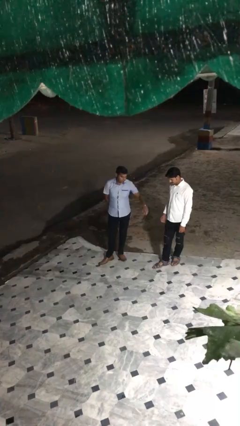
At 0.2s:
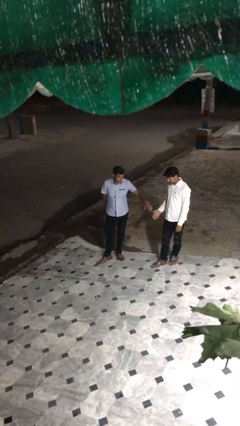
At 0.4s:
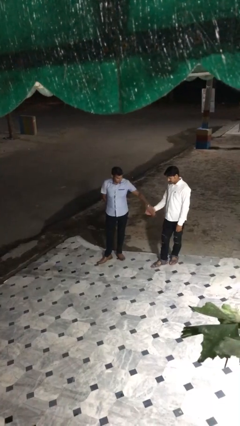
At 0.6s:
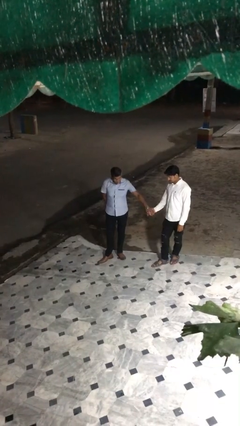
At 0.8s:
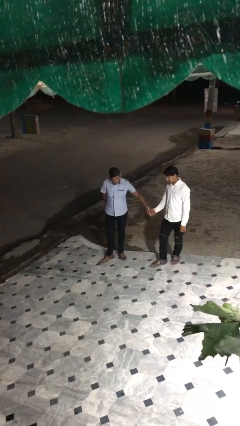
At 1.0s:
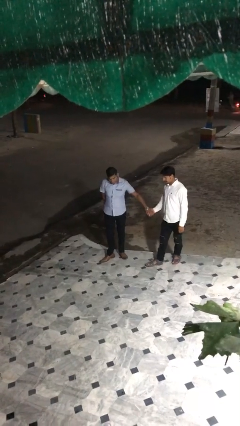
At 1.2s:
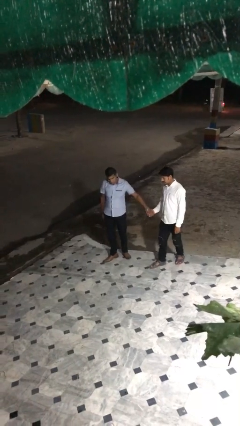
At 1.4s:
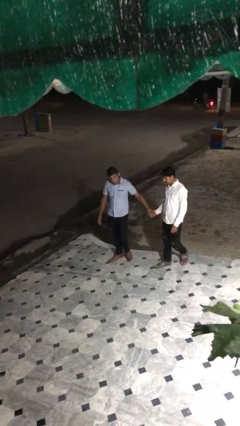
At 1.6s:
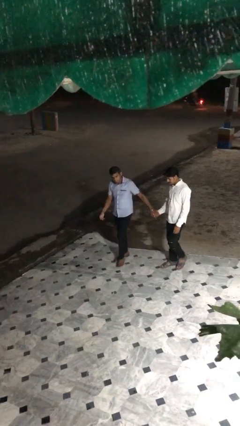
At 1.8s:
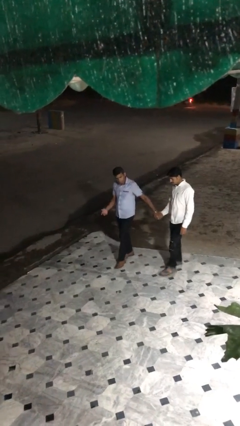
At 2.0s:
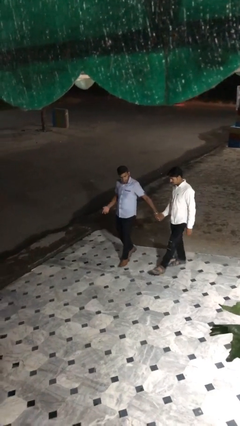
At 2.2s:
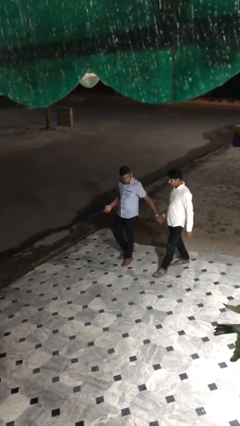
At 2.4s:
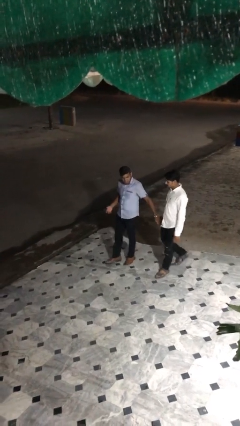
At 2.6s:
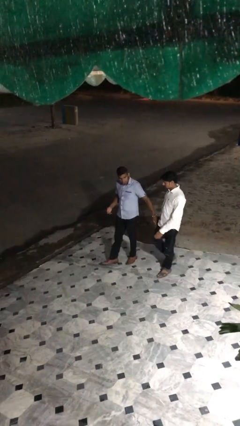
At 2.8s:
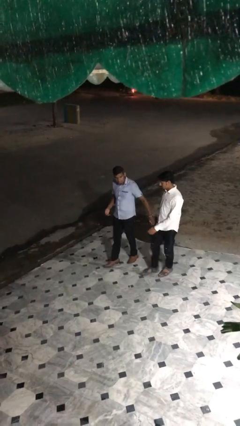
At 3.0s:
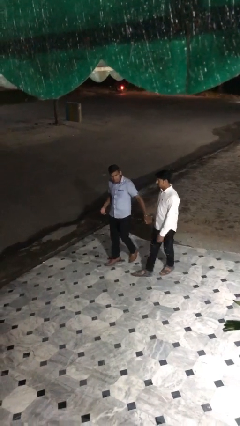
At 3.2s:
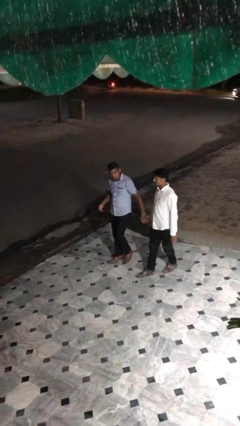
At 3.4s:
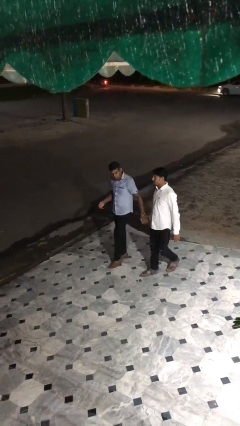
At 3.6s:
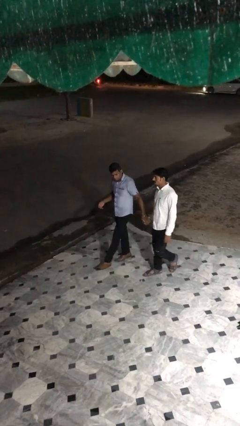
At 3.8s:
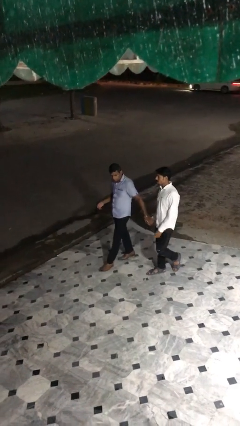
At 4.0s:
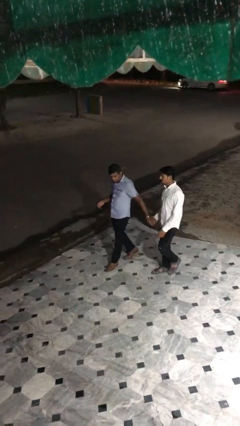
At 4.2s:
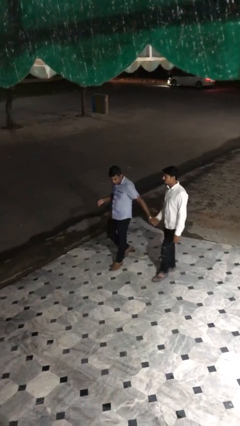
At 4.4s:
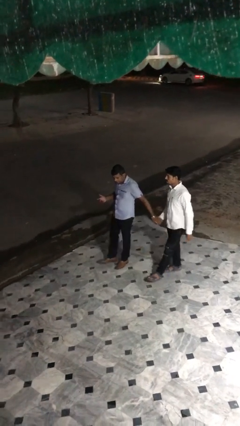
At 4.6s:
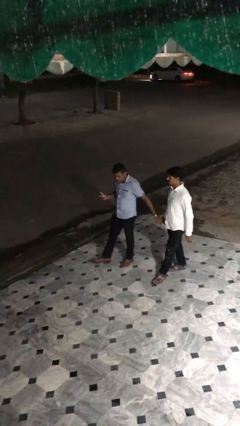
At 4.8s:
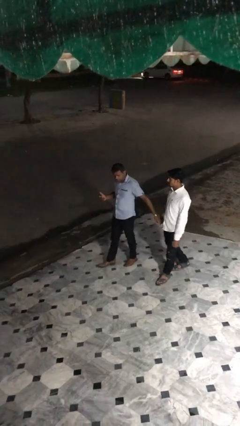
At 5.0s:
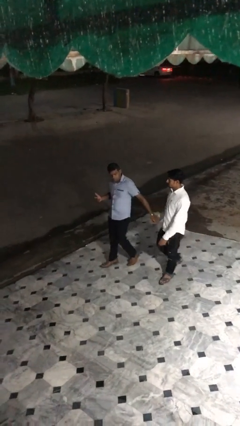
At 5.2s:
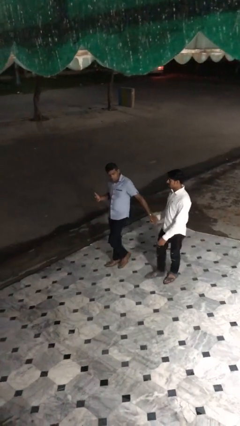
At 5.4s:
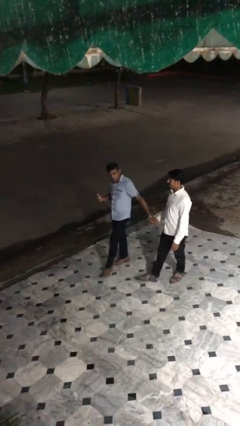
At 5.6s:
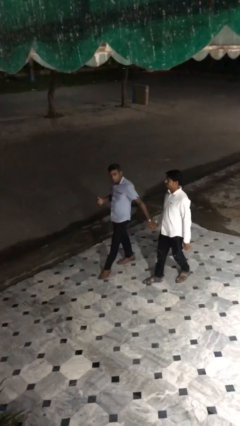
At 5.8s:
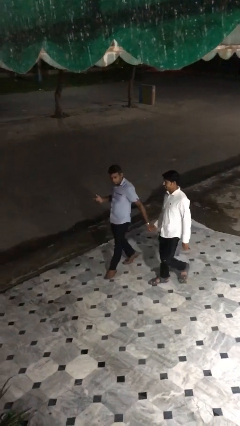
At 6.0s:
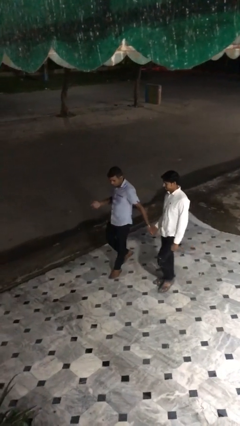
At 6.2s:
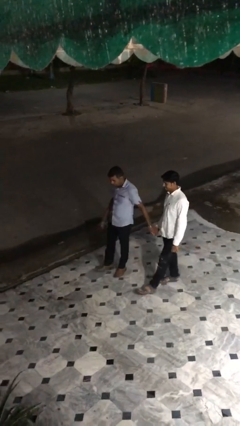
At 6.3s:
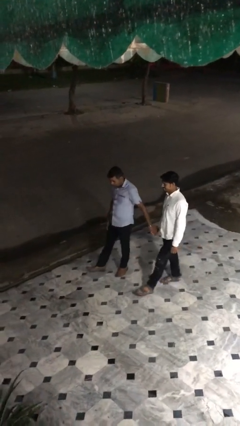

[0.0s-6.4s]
person holds hand

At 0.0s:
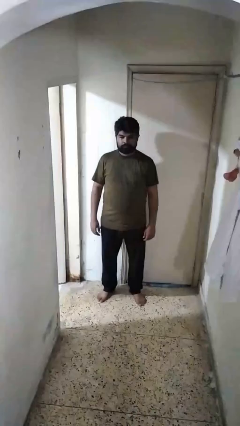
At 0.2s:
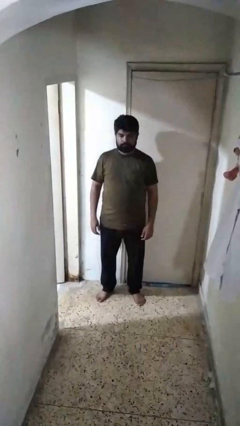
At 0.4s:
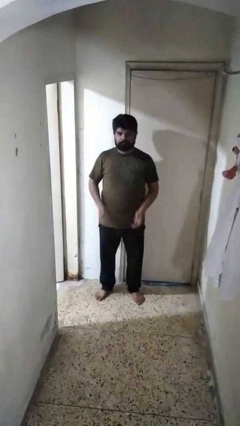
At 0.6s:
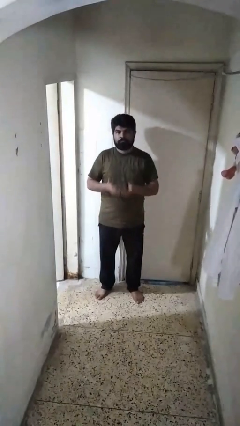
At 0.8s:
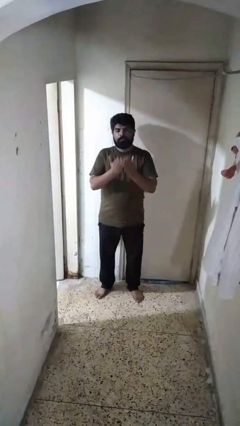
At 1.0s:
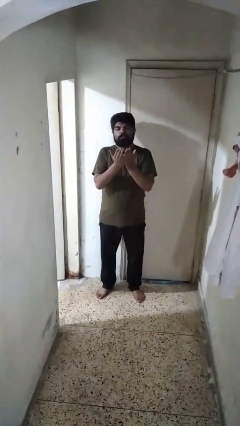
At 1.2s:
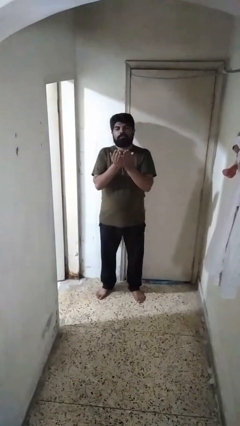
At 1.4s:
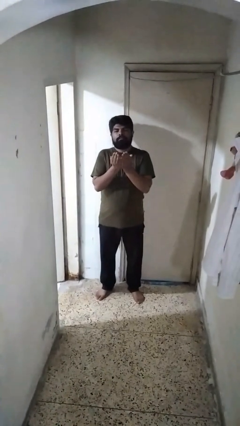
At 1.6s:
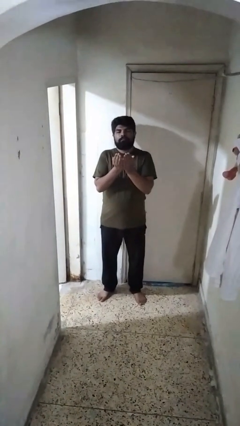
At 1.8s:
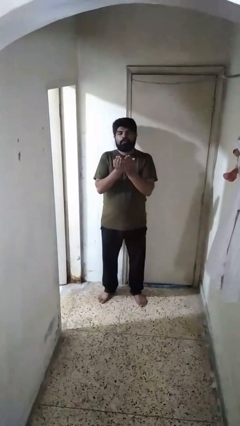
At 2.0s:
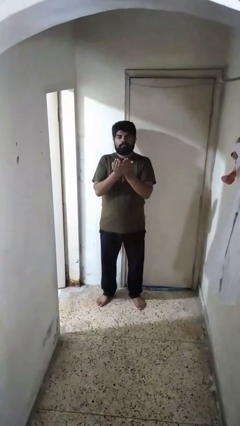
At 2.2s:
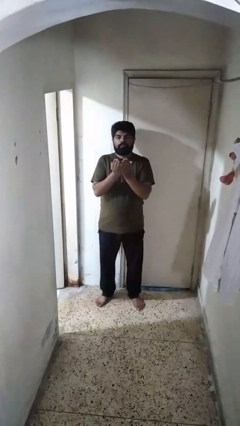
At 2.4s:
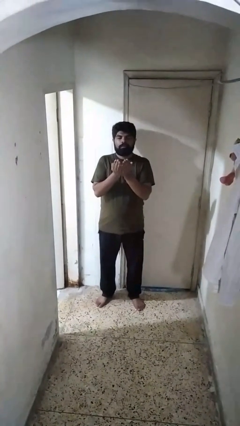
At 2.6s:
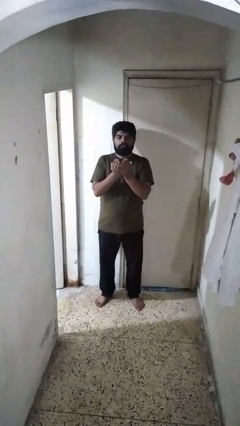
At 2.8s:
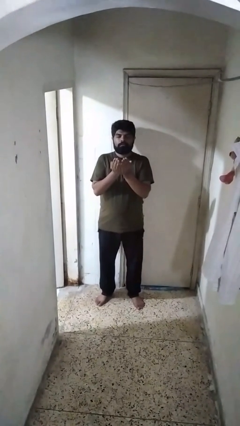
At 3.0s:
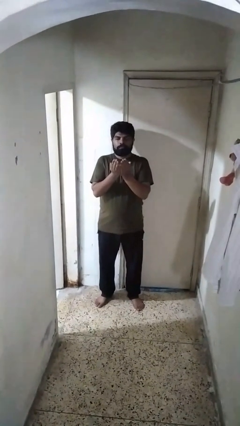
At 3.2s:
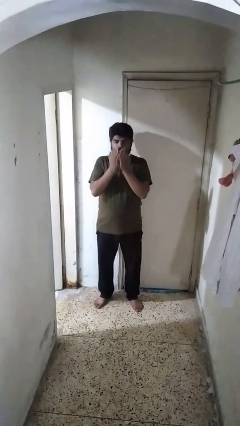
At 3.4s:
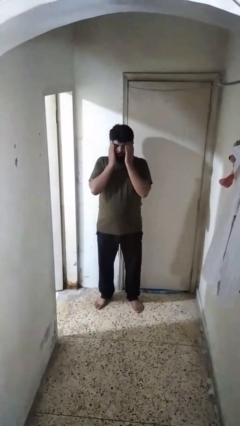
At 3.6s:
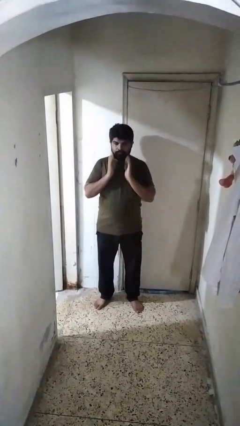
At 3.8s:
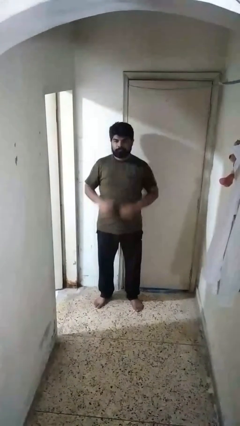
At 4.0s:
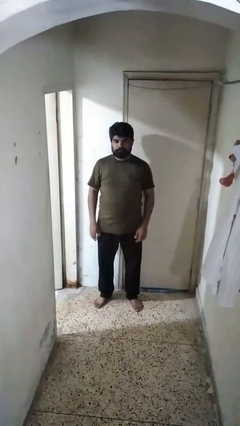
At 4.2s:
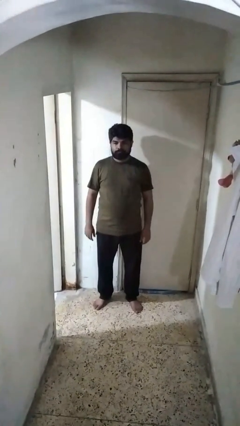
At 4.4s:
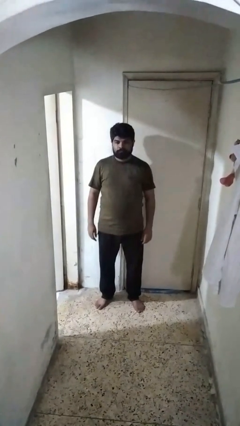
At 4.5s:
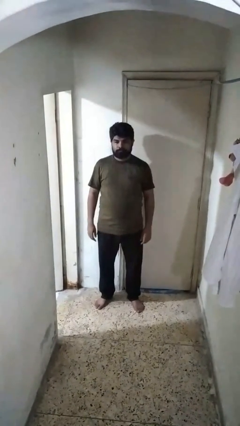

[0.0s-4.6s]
person prays

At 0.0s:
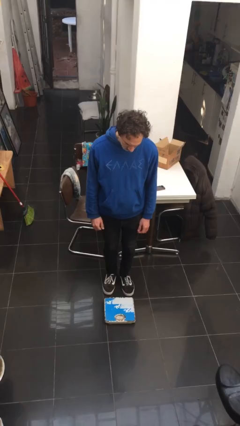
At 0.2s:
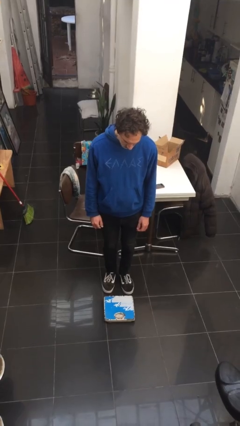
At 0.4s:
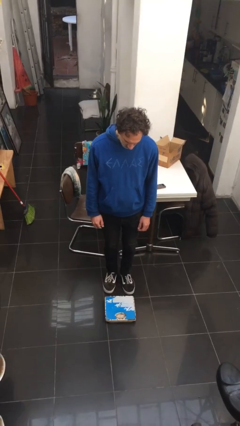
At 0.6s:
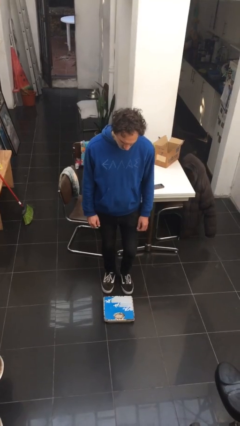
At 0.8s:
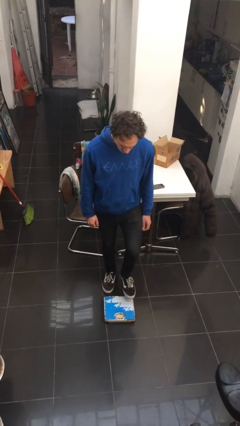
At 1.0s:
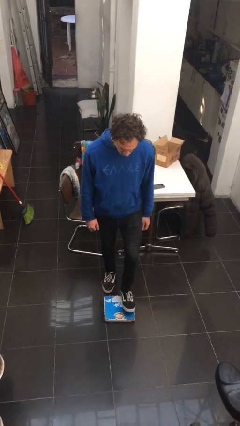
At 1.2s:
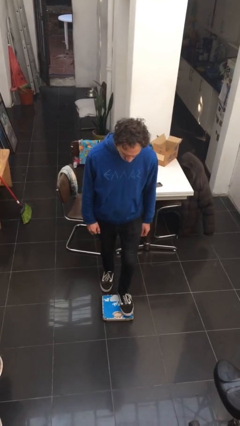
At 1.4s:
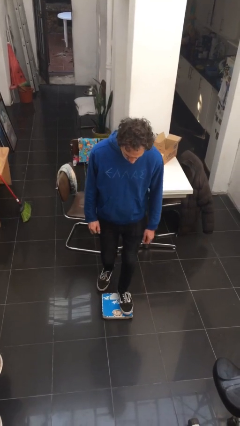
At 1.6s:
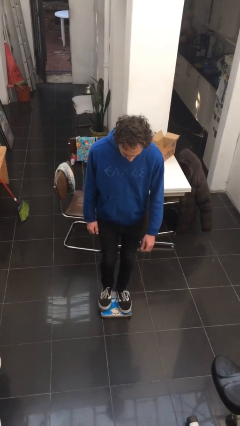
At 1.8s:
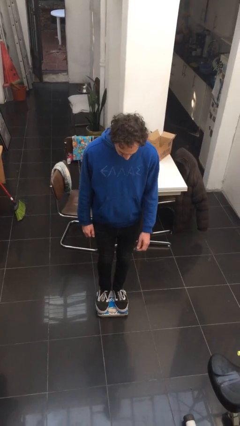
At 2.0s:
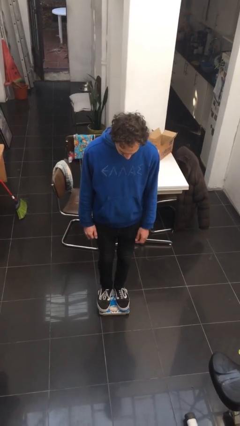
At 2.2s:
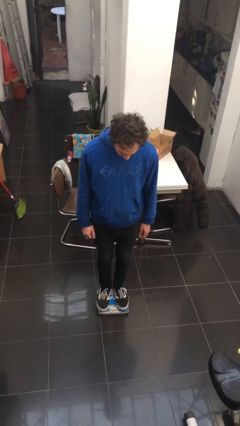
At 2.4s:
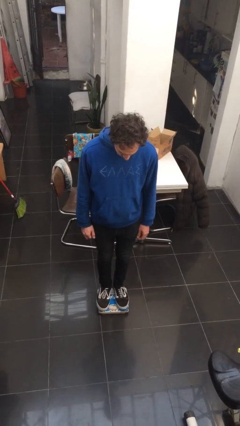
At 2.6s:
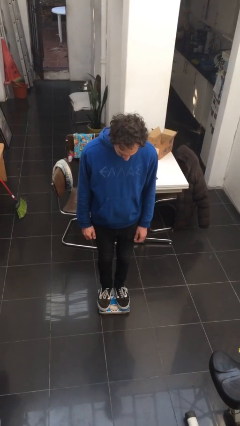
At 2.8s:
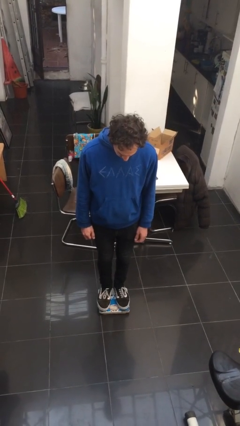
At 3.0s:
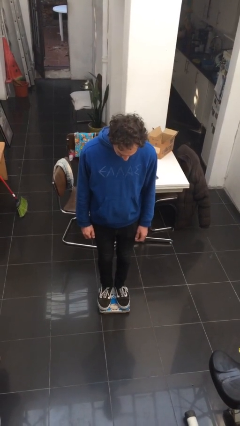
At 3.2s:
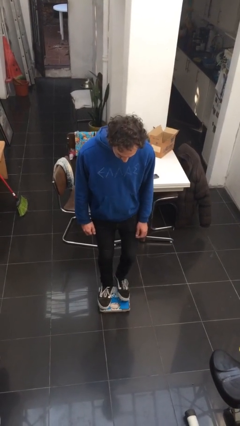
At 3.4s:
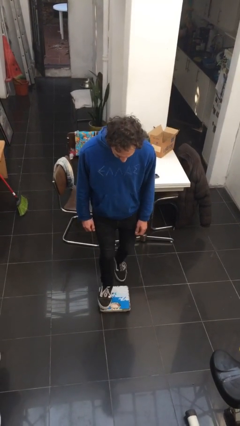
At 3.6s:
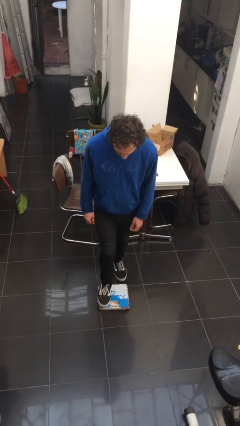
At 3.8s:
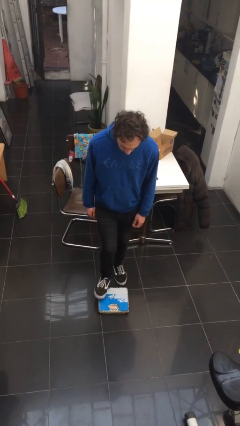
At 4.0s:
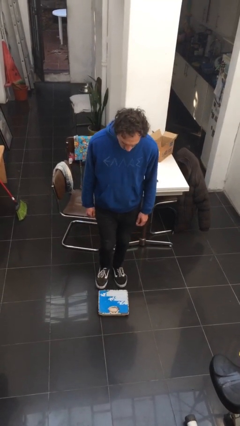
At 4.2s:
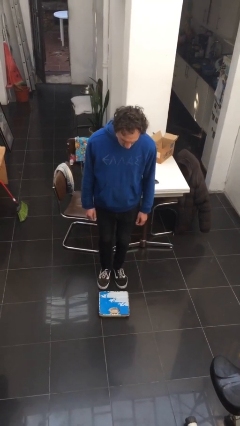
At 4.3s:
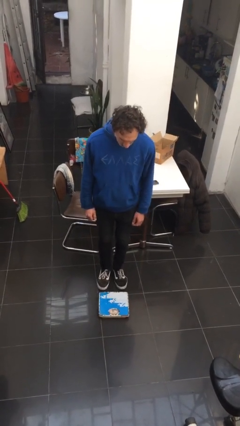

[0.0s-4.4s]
person uses bodyweight scale

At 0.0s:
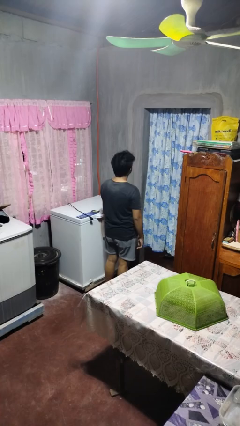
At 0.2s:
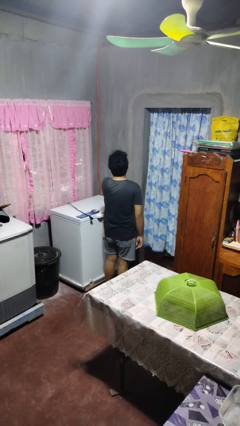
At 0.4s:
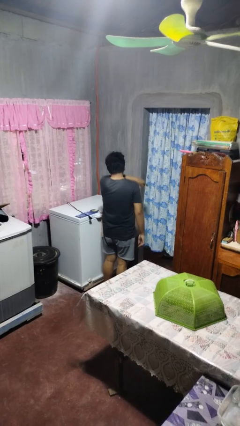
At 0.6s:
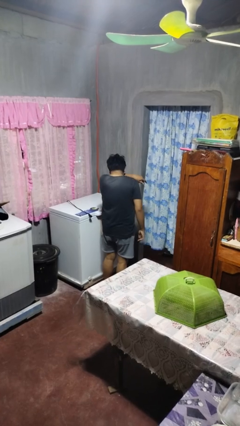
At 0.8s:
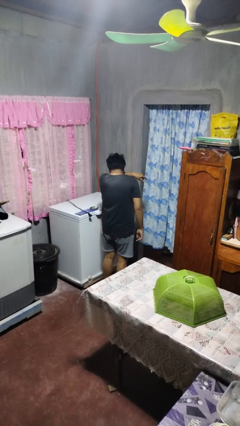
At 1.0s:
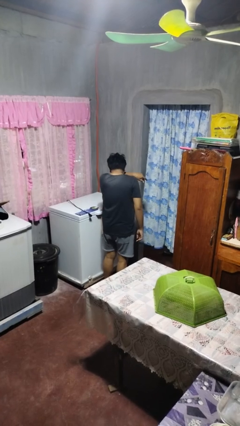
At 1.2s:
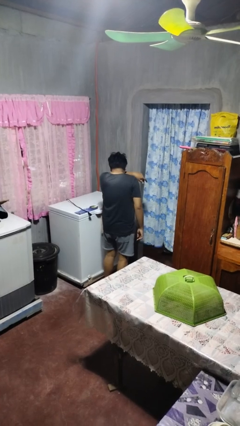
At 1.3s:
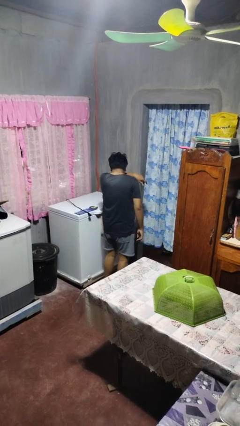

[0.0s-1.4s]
person sneezes into arm

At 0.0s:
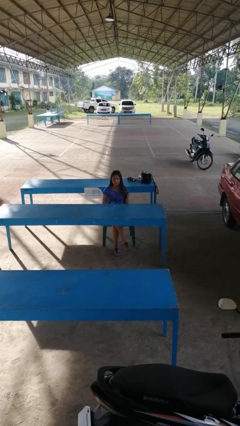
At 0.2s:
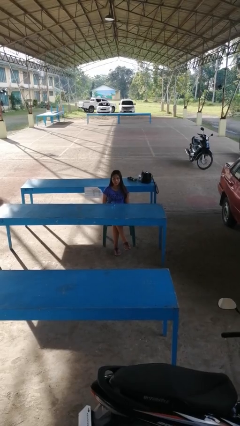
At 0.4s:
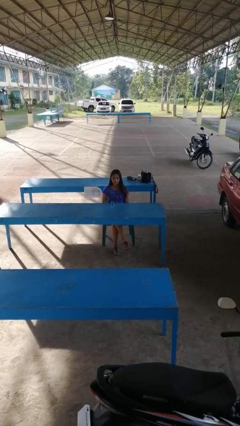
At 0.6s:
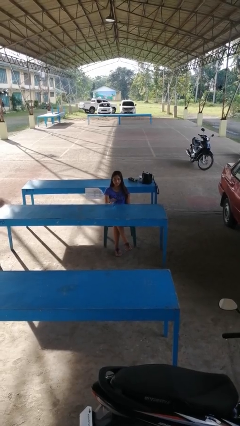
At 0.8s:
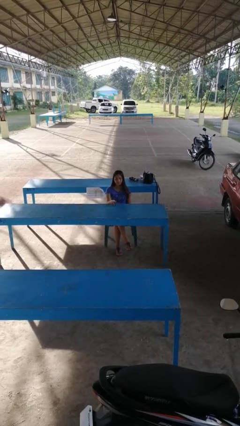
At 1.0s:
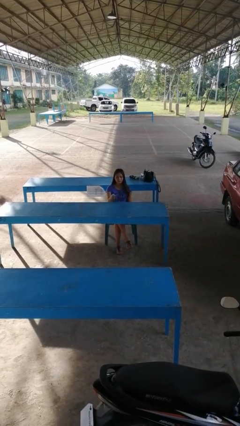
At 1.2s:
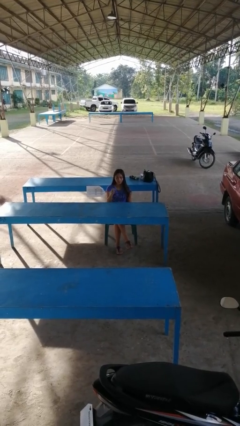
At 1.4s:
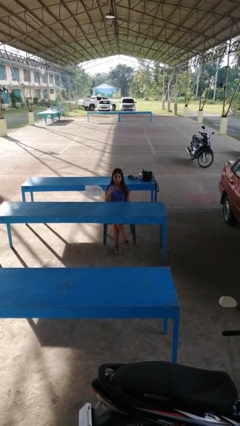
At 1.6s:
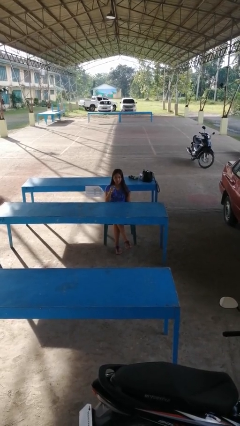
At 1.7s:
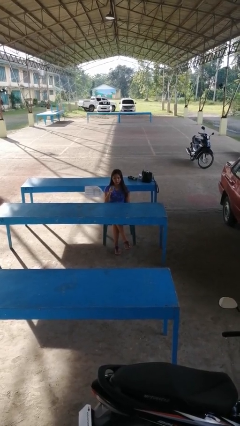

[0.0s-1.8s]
person picks up object from table
